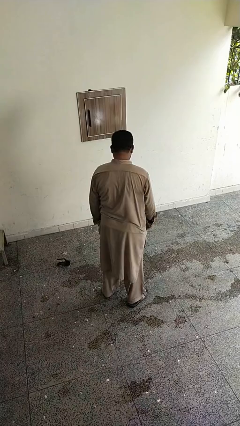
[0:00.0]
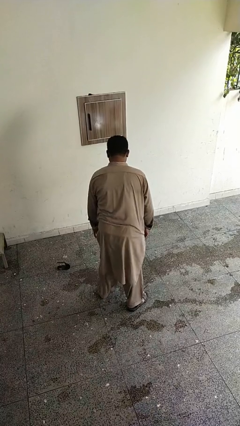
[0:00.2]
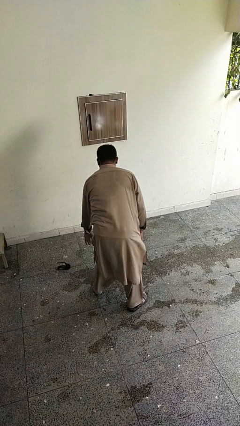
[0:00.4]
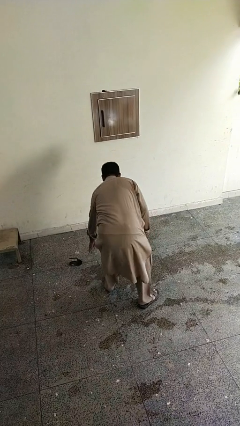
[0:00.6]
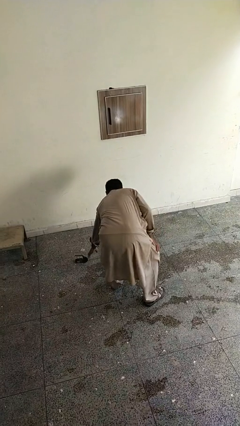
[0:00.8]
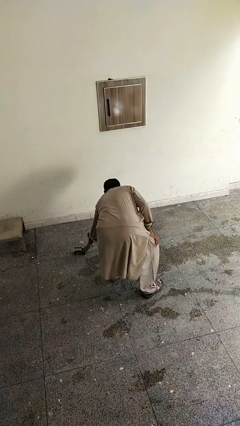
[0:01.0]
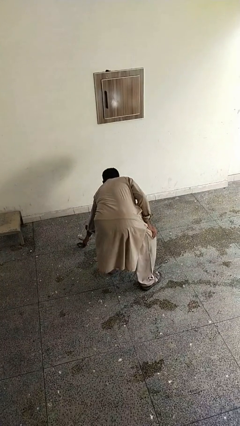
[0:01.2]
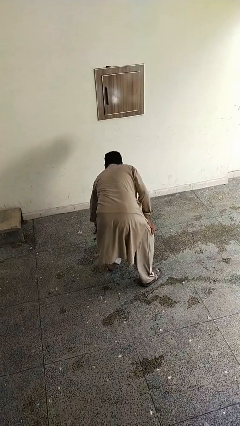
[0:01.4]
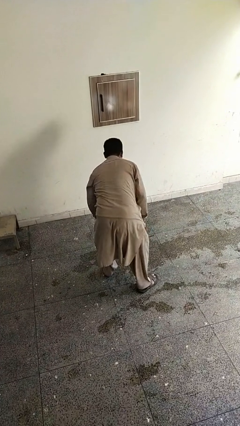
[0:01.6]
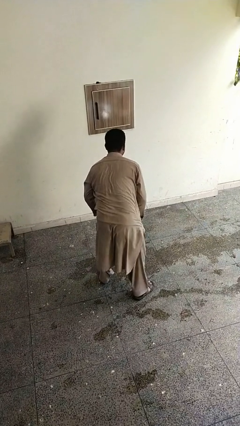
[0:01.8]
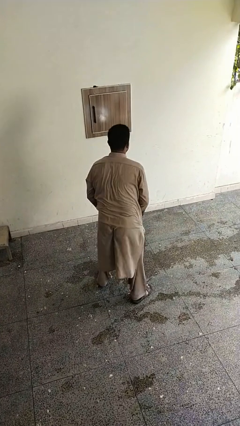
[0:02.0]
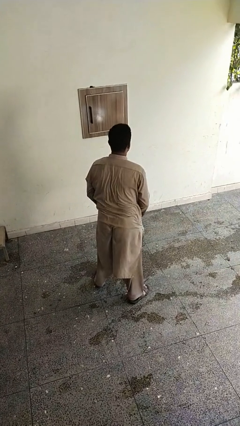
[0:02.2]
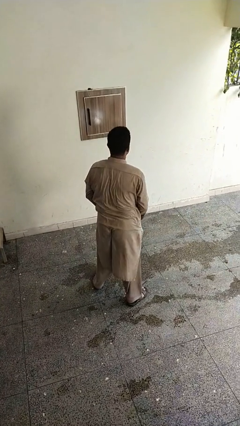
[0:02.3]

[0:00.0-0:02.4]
person picks up object from floor

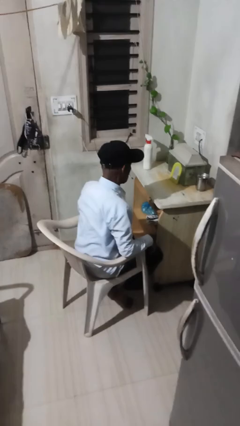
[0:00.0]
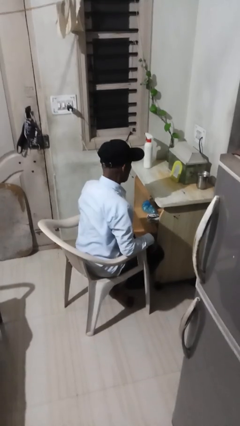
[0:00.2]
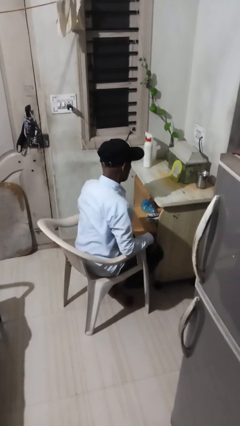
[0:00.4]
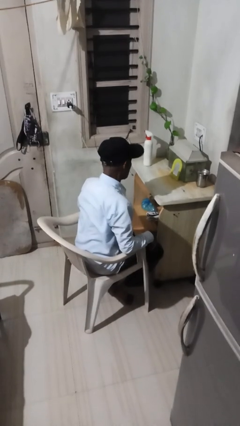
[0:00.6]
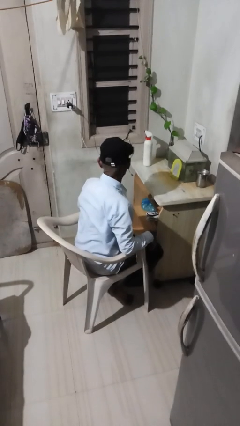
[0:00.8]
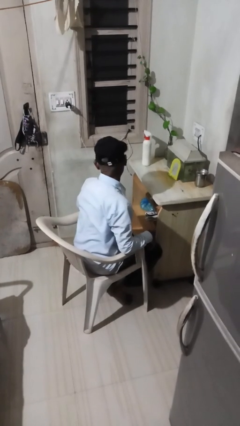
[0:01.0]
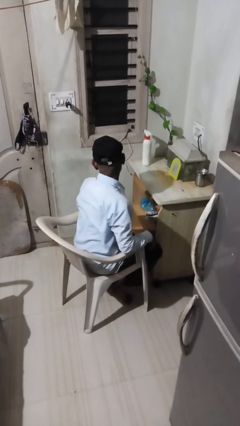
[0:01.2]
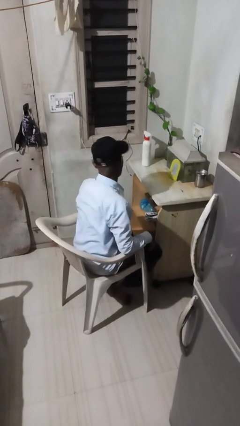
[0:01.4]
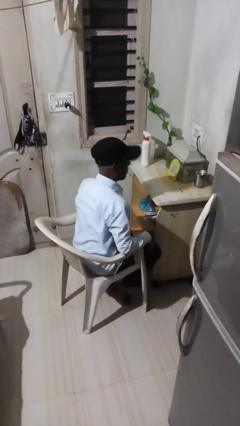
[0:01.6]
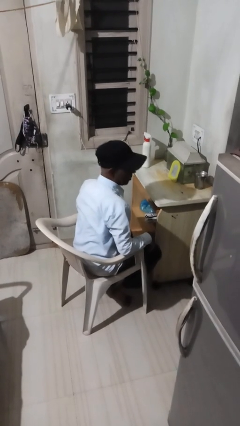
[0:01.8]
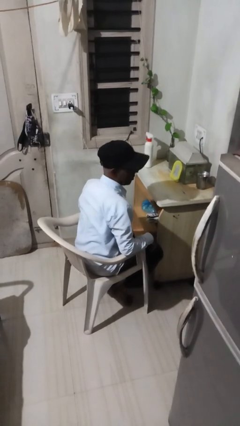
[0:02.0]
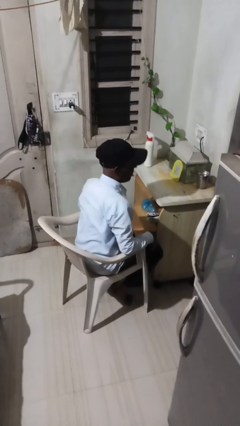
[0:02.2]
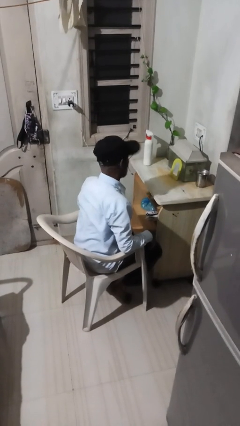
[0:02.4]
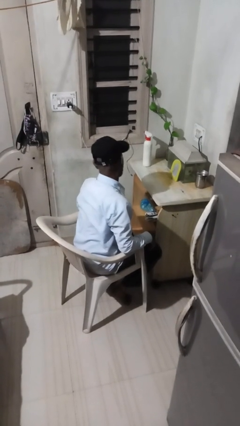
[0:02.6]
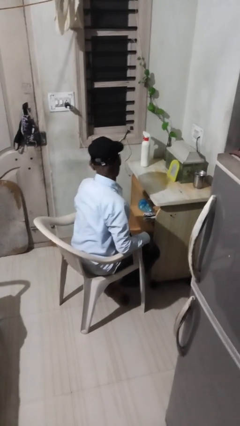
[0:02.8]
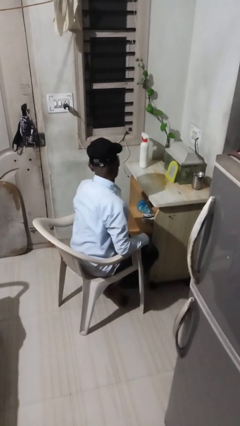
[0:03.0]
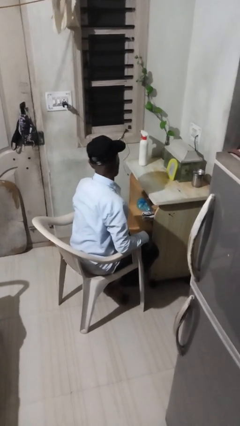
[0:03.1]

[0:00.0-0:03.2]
person shakes head

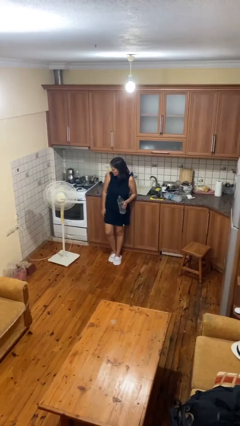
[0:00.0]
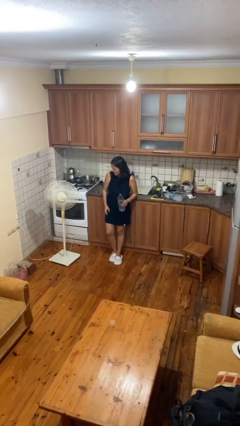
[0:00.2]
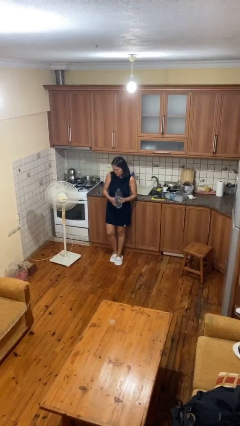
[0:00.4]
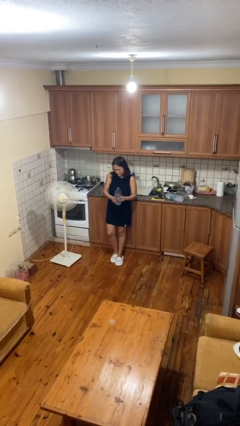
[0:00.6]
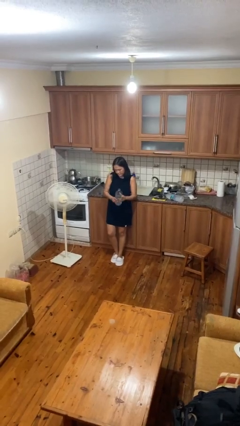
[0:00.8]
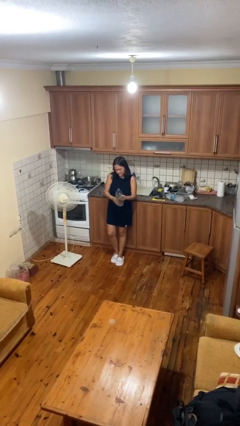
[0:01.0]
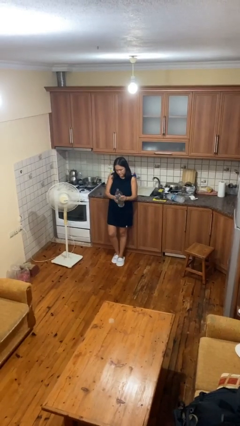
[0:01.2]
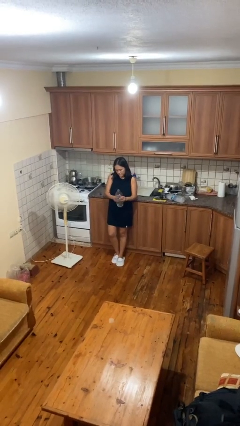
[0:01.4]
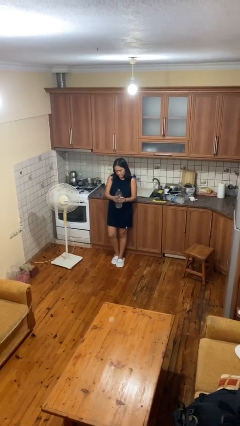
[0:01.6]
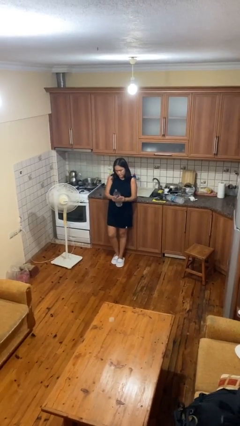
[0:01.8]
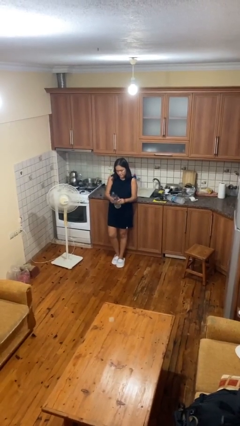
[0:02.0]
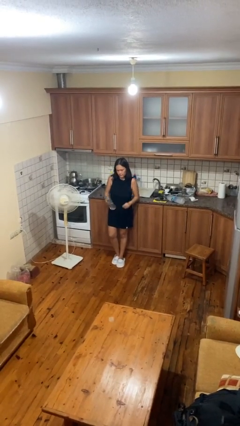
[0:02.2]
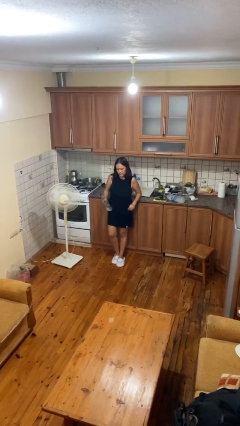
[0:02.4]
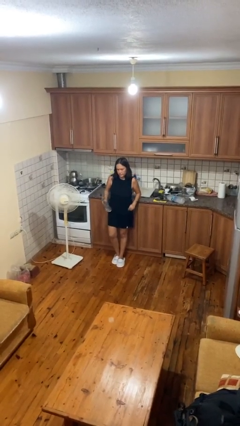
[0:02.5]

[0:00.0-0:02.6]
person squeezes object

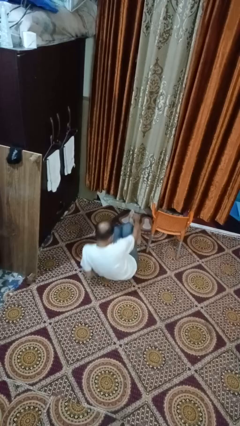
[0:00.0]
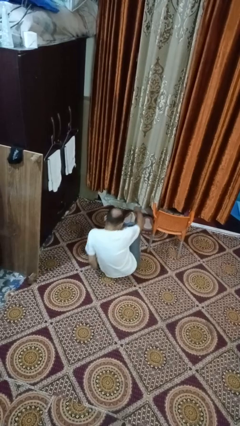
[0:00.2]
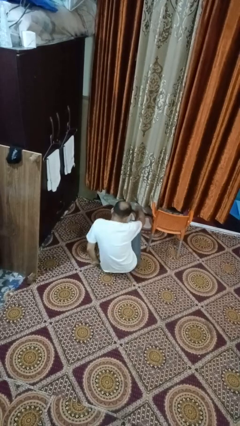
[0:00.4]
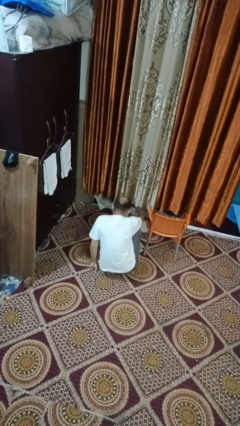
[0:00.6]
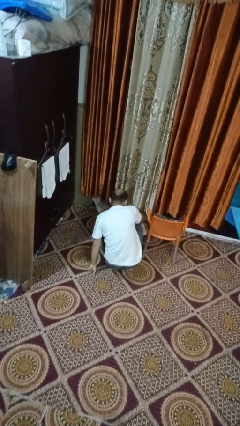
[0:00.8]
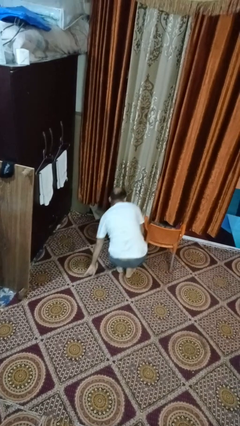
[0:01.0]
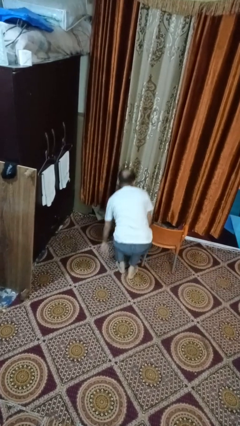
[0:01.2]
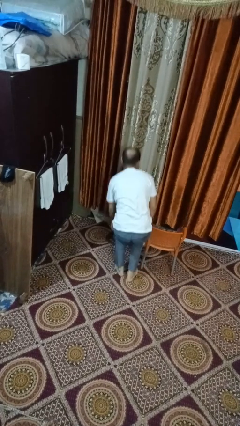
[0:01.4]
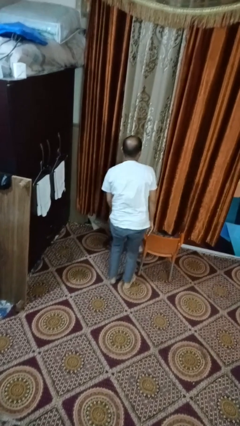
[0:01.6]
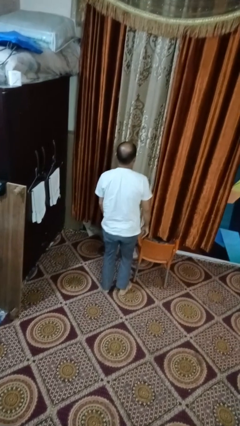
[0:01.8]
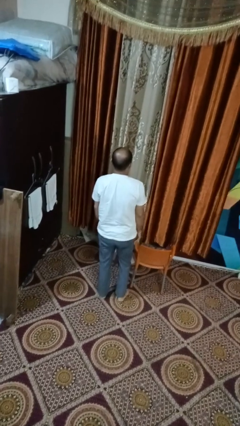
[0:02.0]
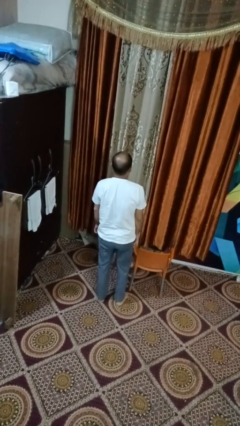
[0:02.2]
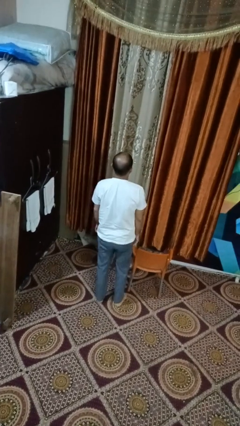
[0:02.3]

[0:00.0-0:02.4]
person stands up from floor

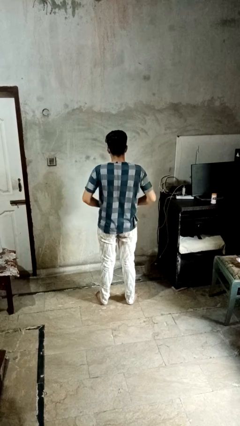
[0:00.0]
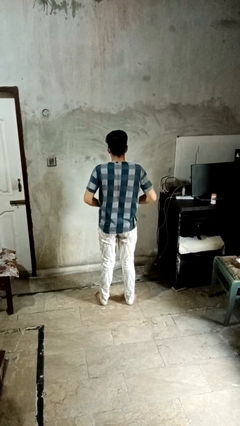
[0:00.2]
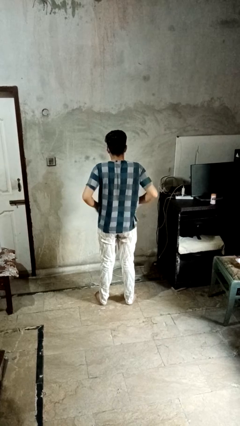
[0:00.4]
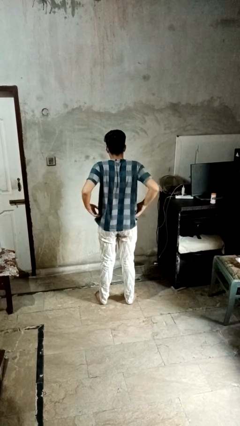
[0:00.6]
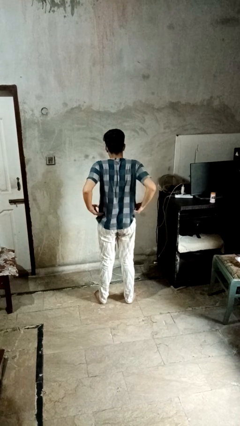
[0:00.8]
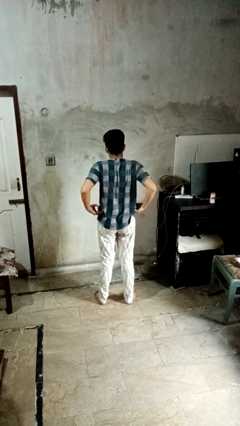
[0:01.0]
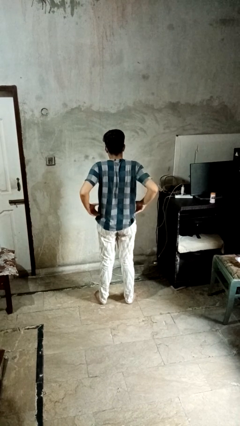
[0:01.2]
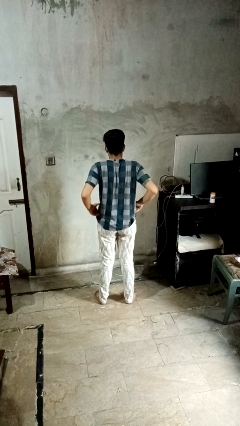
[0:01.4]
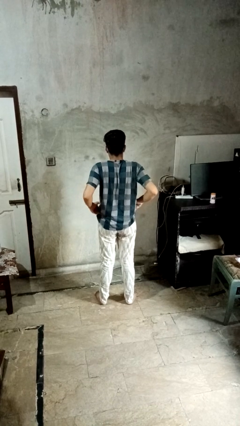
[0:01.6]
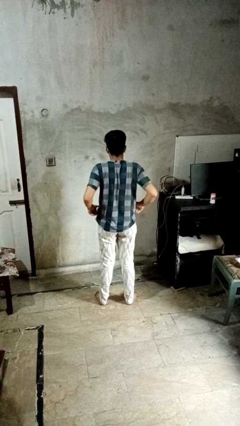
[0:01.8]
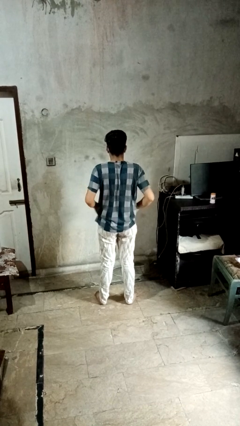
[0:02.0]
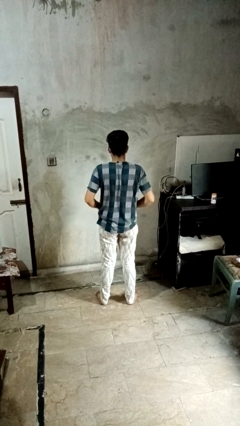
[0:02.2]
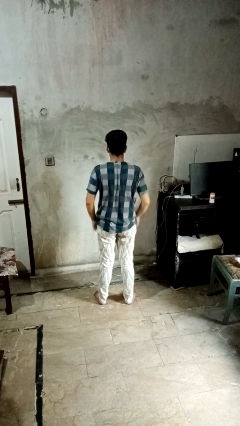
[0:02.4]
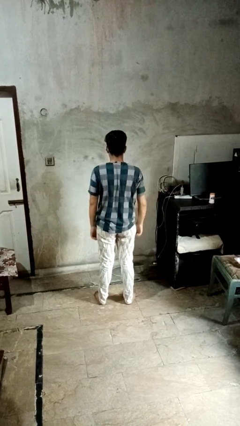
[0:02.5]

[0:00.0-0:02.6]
person hikes up pants

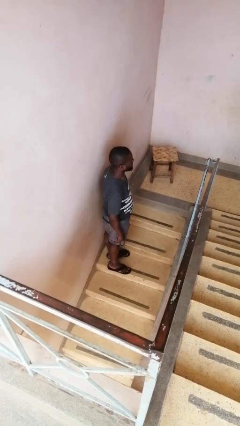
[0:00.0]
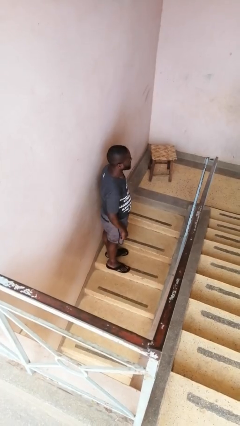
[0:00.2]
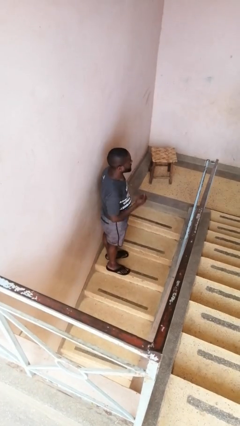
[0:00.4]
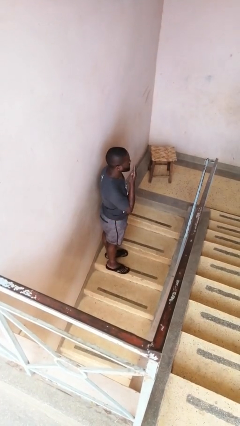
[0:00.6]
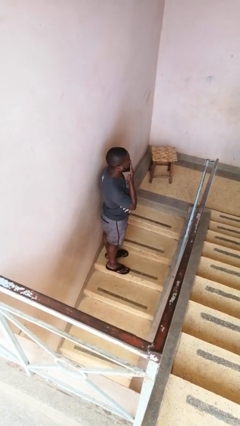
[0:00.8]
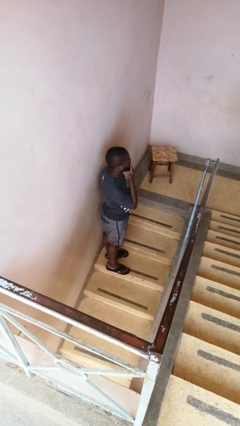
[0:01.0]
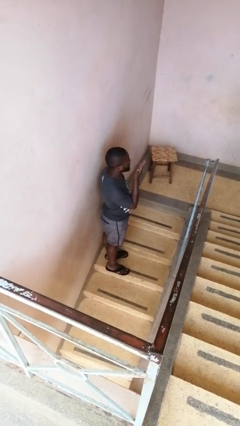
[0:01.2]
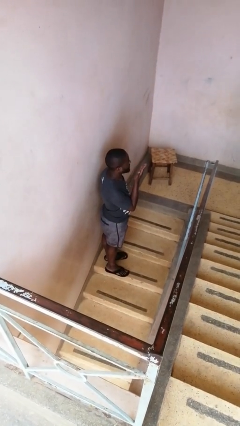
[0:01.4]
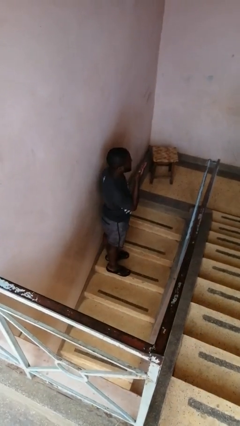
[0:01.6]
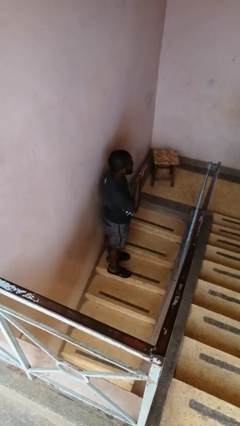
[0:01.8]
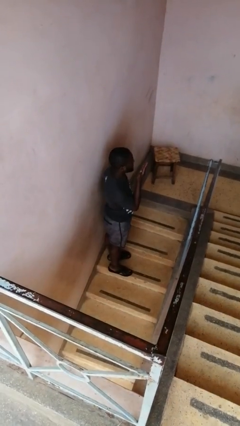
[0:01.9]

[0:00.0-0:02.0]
person gestures blow kiss

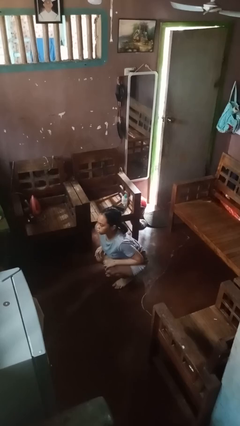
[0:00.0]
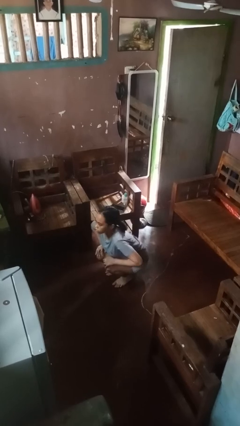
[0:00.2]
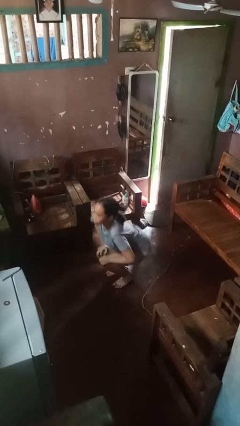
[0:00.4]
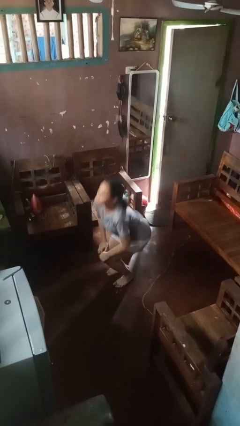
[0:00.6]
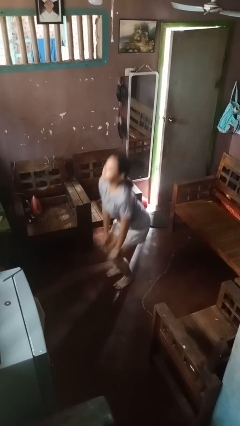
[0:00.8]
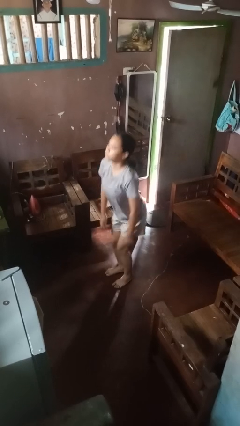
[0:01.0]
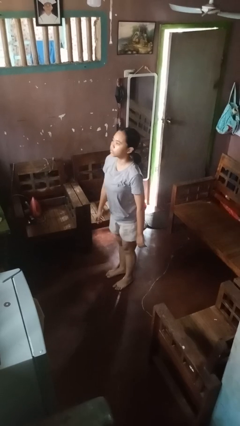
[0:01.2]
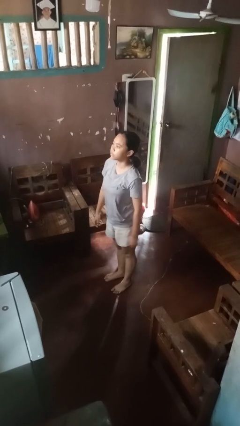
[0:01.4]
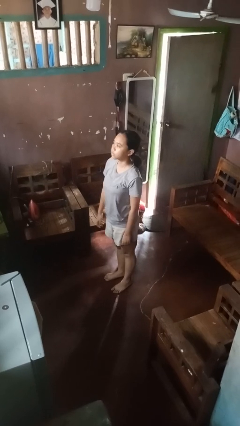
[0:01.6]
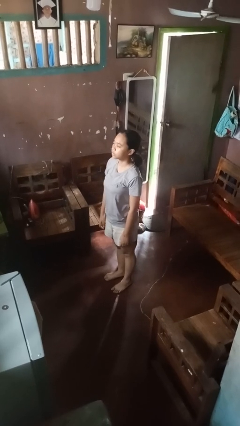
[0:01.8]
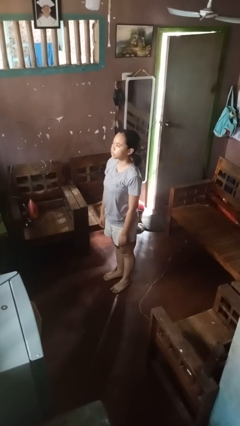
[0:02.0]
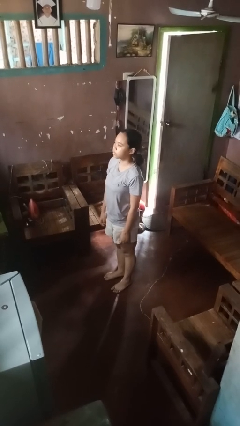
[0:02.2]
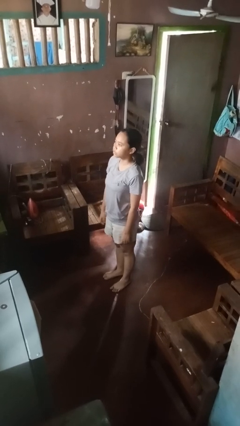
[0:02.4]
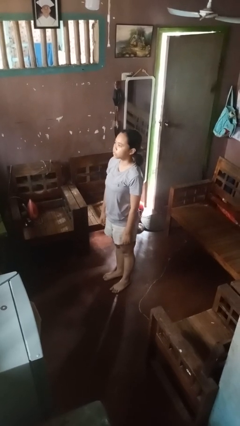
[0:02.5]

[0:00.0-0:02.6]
person stands up
